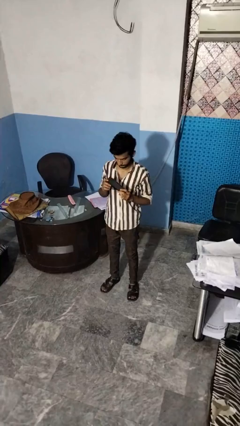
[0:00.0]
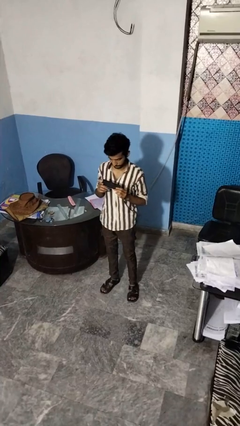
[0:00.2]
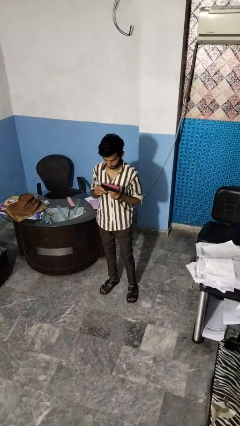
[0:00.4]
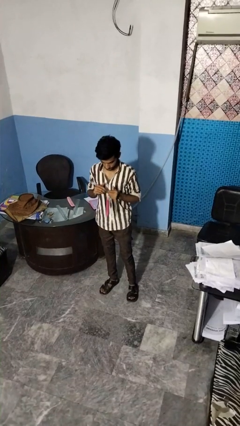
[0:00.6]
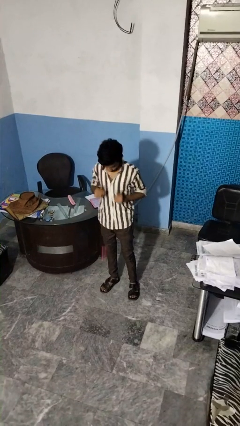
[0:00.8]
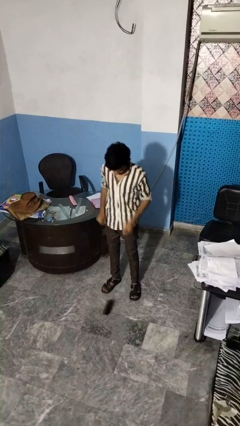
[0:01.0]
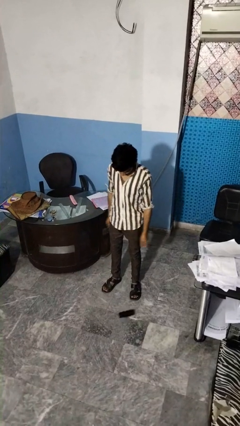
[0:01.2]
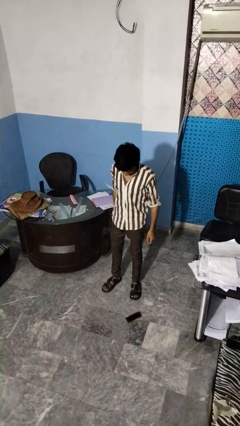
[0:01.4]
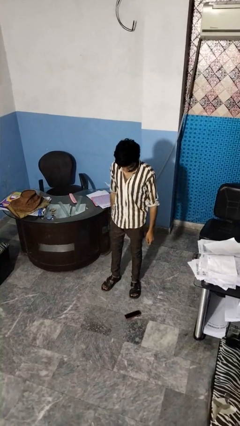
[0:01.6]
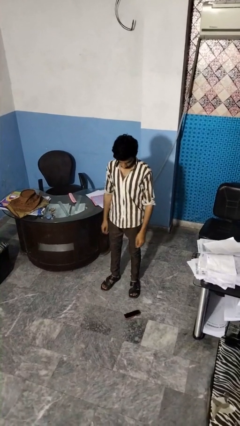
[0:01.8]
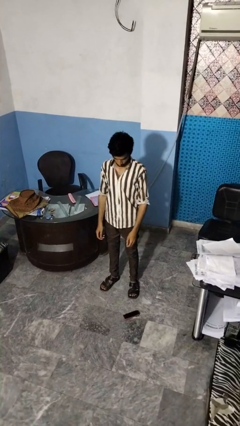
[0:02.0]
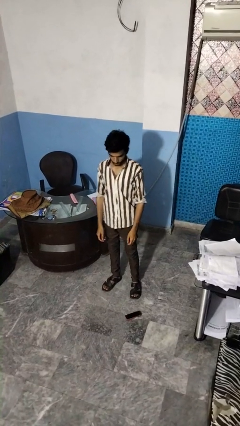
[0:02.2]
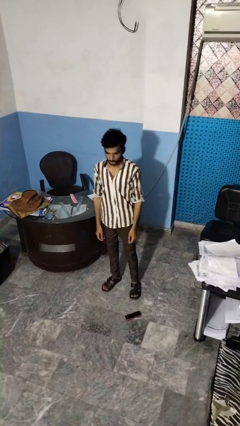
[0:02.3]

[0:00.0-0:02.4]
person drops object

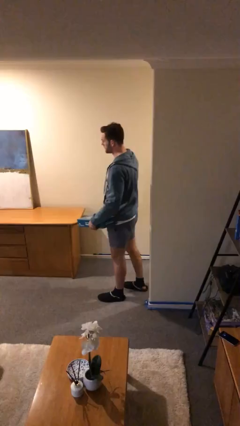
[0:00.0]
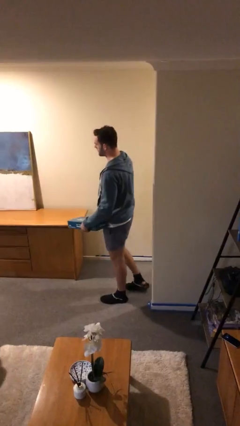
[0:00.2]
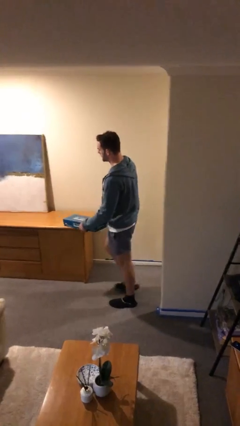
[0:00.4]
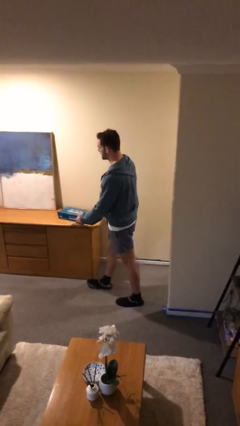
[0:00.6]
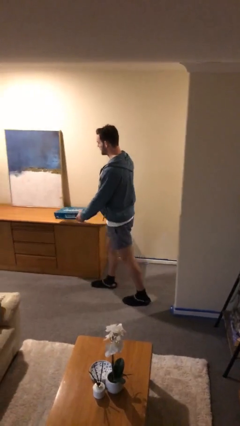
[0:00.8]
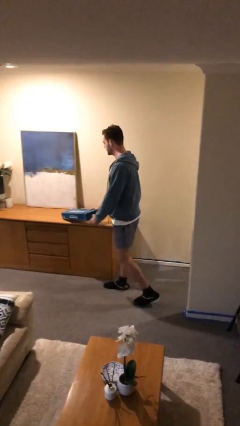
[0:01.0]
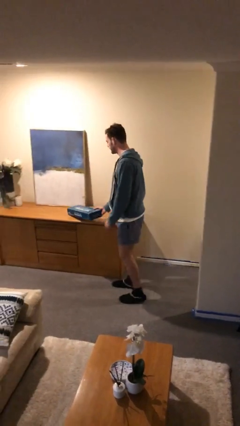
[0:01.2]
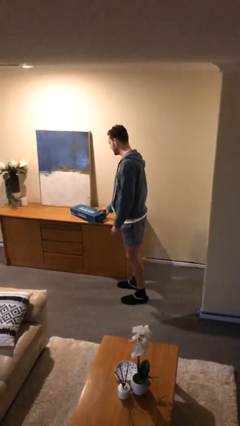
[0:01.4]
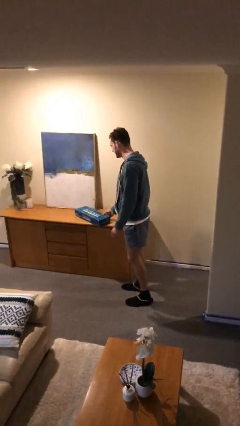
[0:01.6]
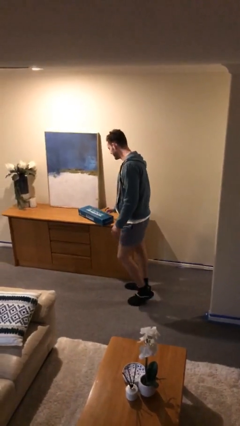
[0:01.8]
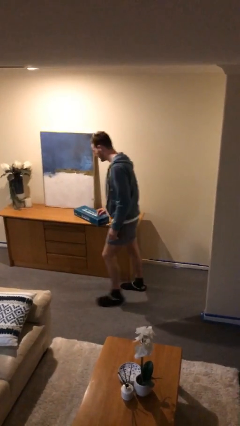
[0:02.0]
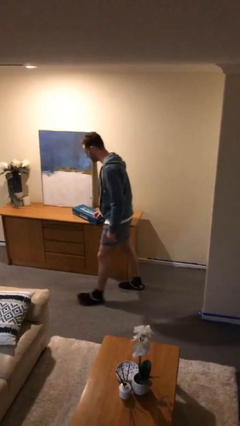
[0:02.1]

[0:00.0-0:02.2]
person puts down object on table

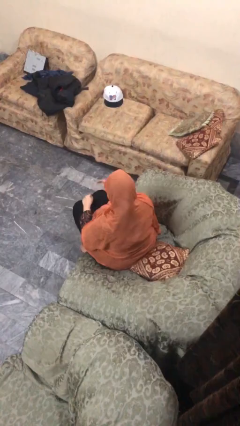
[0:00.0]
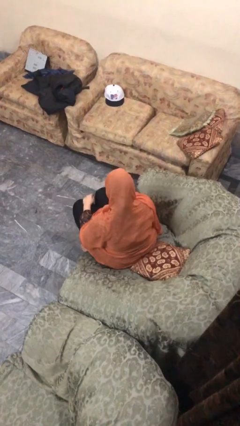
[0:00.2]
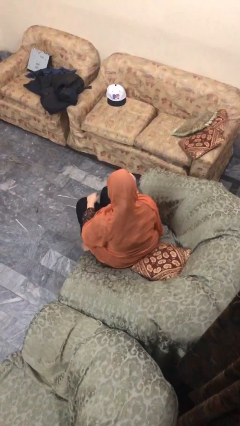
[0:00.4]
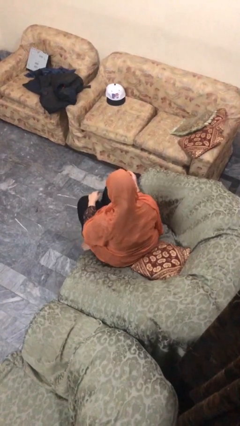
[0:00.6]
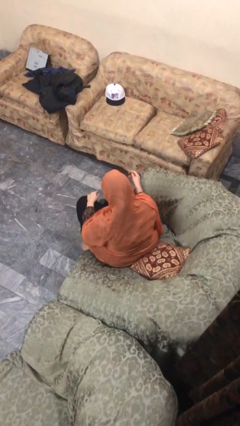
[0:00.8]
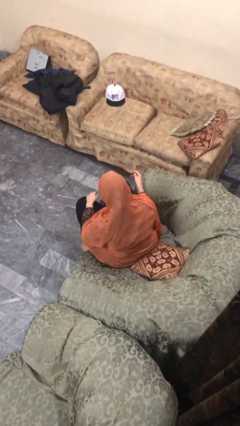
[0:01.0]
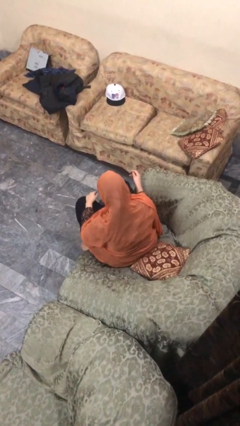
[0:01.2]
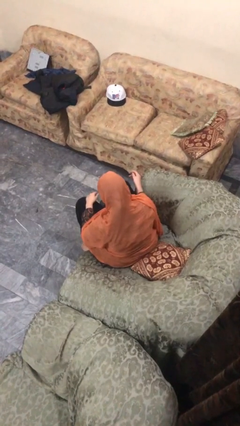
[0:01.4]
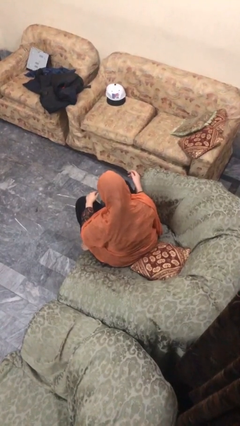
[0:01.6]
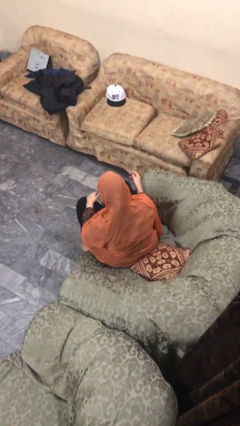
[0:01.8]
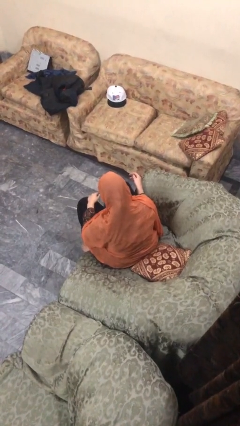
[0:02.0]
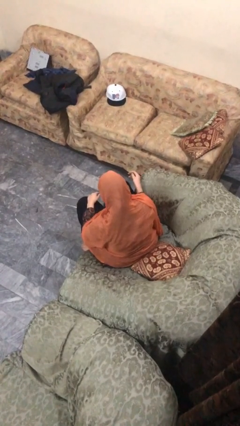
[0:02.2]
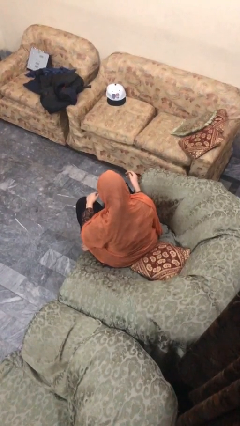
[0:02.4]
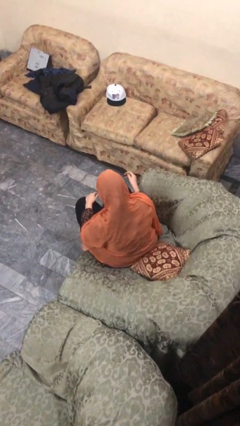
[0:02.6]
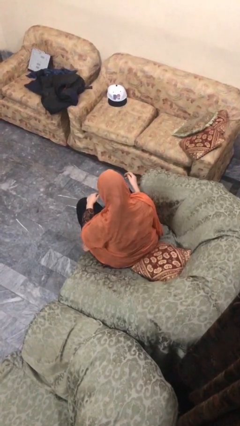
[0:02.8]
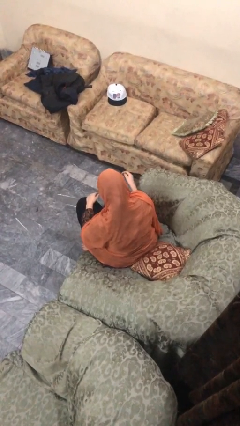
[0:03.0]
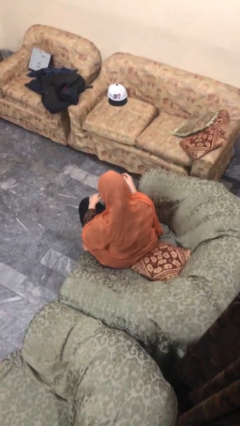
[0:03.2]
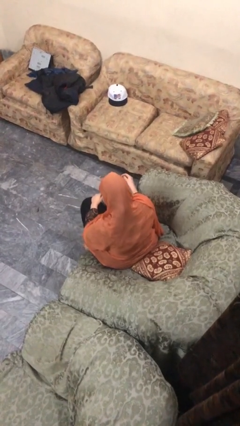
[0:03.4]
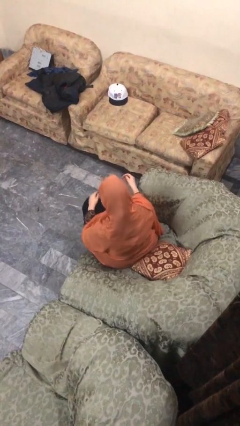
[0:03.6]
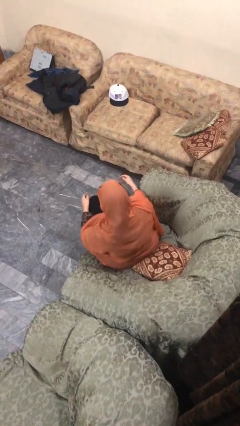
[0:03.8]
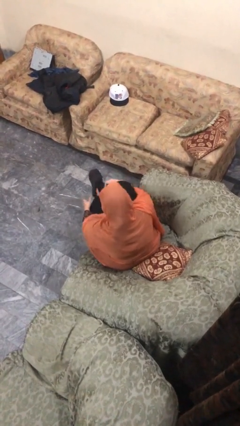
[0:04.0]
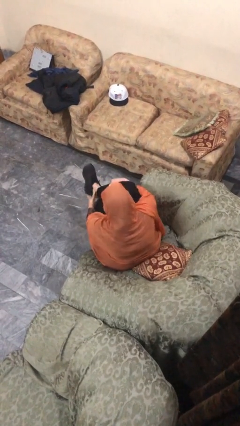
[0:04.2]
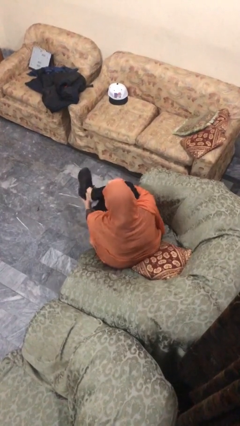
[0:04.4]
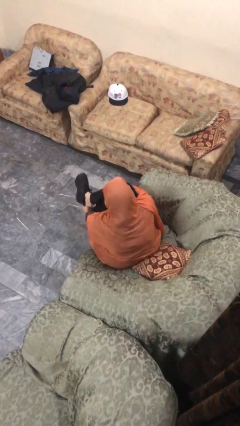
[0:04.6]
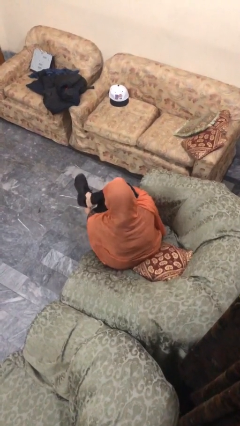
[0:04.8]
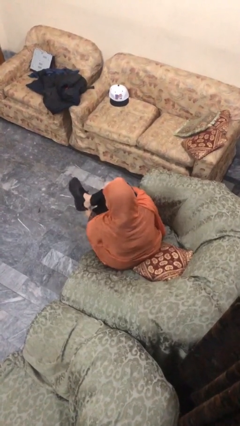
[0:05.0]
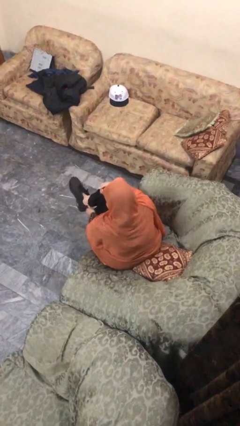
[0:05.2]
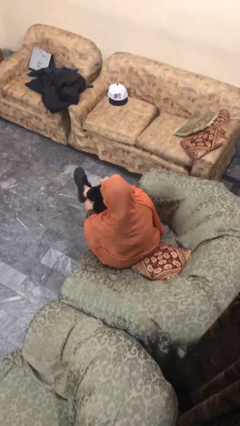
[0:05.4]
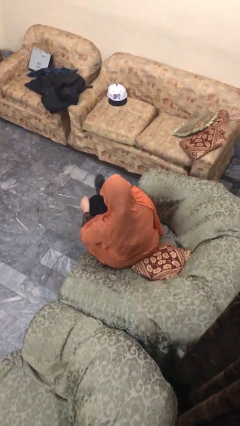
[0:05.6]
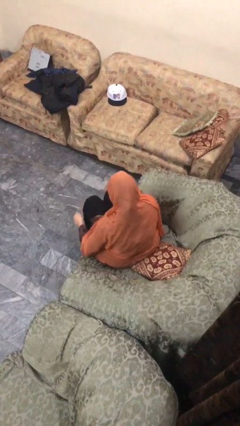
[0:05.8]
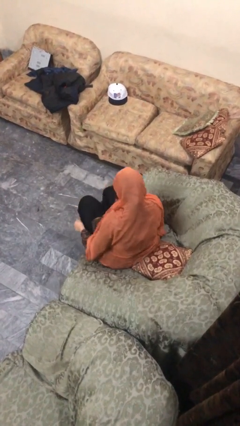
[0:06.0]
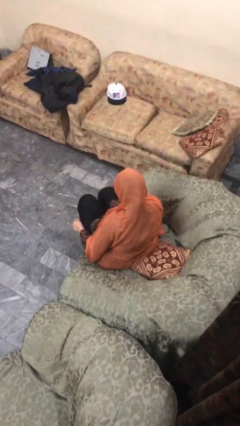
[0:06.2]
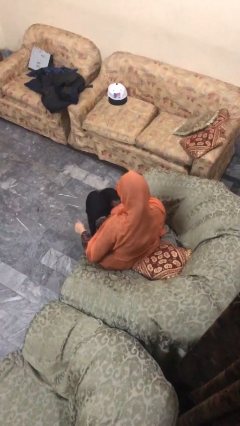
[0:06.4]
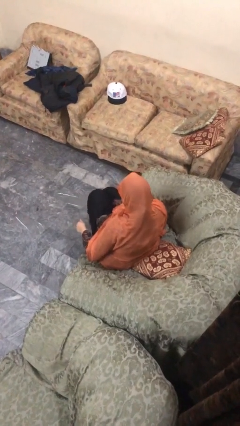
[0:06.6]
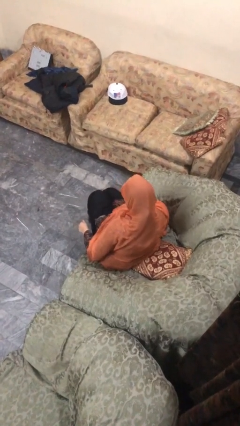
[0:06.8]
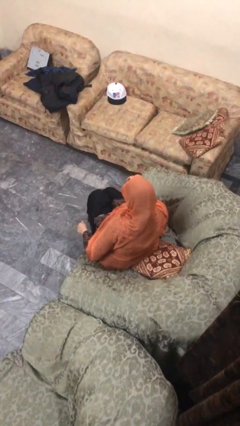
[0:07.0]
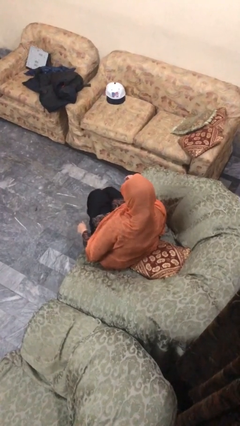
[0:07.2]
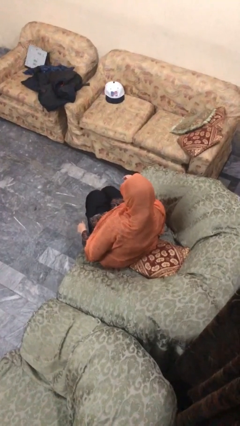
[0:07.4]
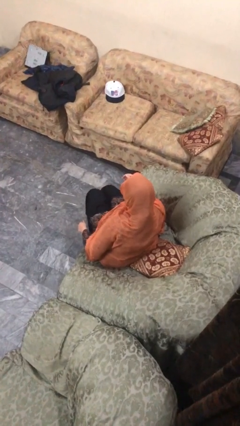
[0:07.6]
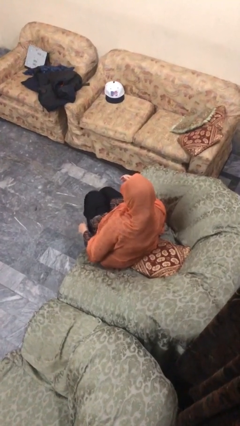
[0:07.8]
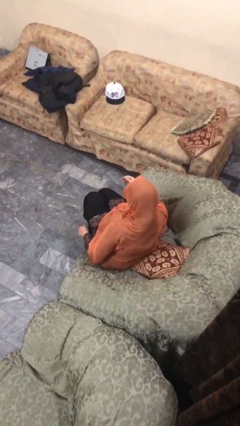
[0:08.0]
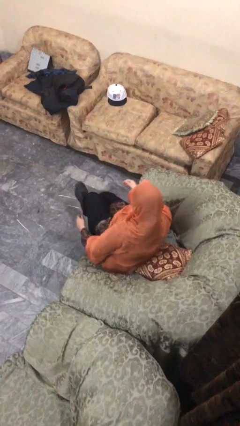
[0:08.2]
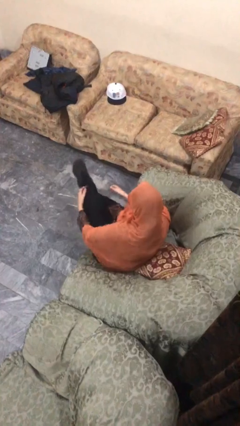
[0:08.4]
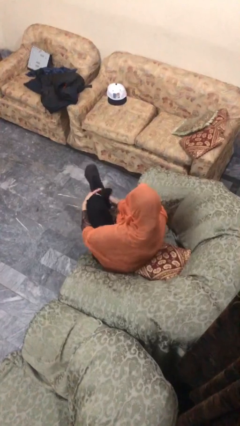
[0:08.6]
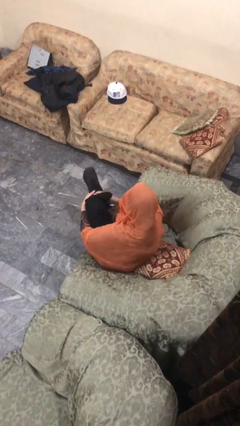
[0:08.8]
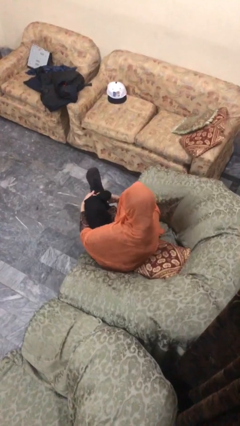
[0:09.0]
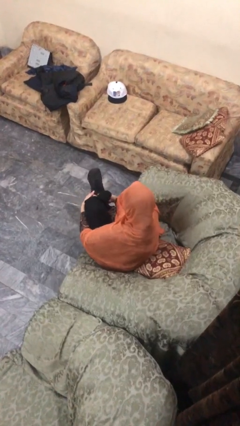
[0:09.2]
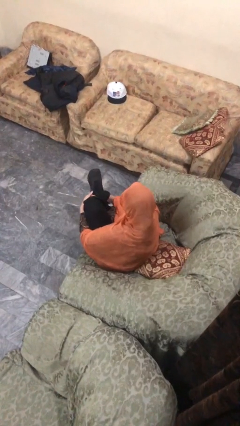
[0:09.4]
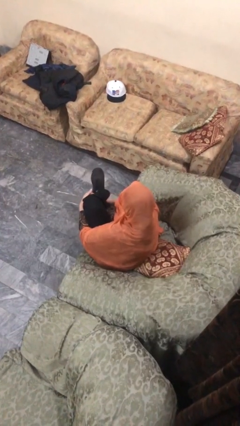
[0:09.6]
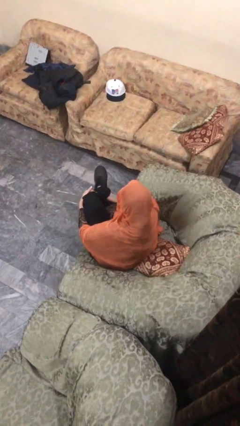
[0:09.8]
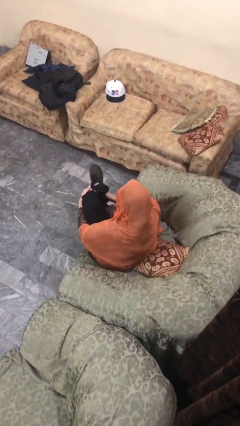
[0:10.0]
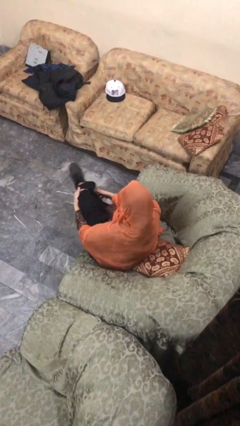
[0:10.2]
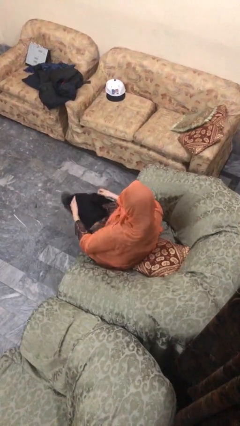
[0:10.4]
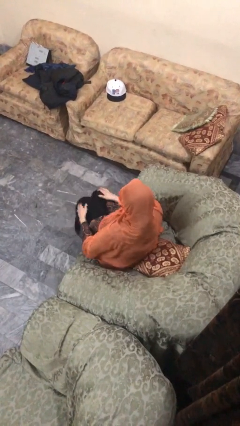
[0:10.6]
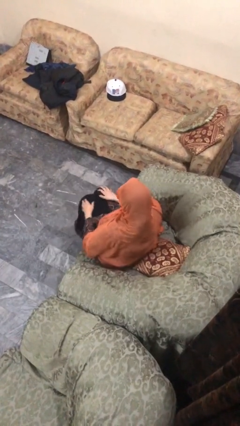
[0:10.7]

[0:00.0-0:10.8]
person puts on shoes

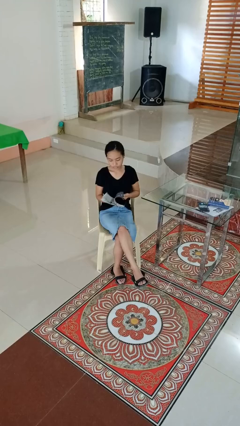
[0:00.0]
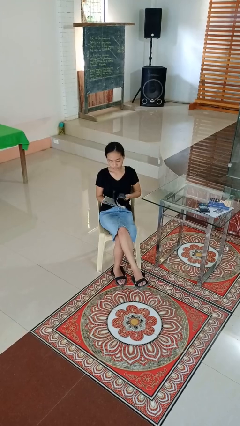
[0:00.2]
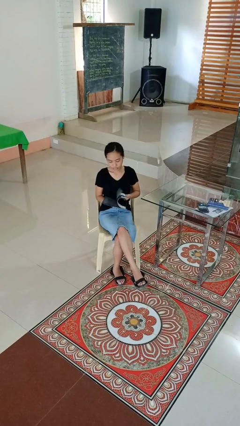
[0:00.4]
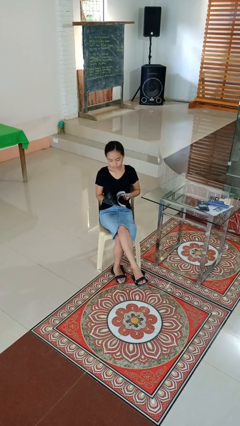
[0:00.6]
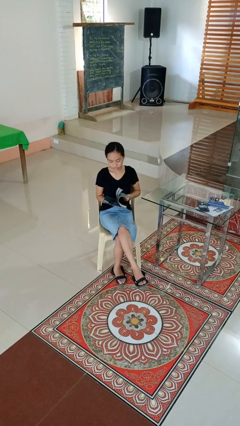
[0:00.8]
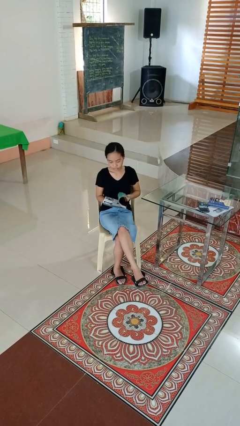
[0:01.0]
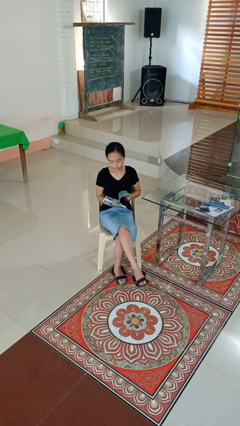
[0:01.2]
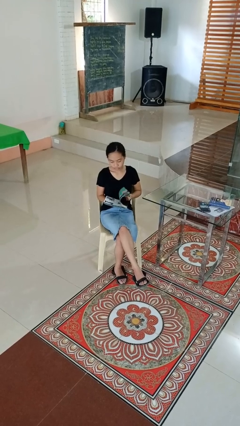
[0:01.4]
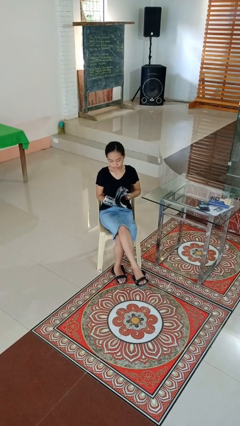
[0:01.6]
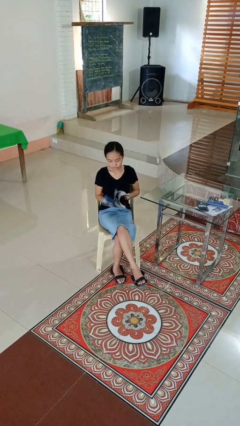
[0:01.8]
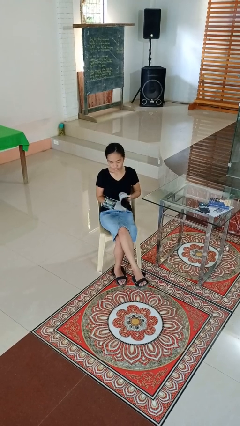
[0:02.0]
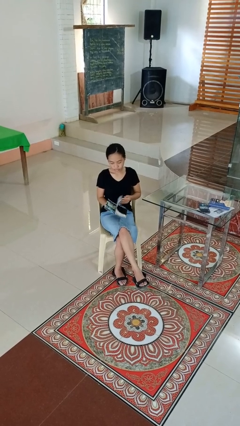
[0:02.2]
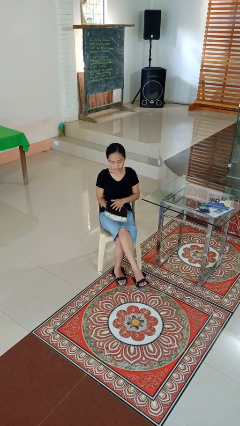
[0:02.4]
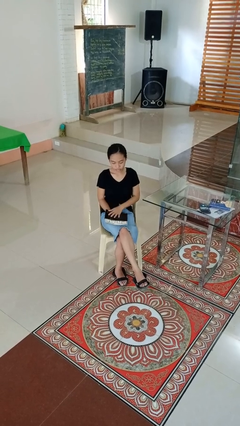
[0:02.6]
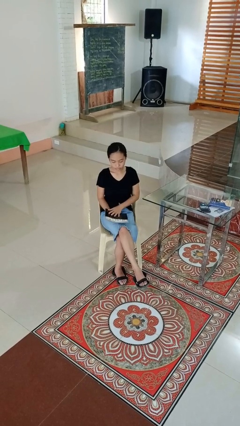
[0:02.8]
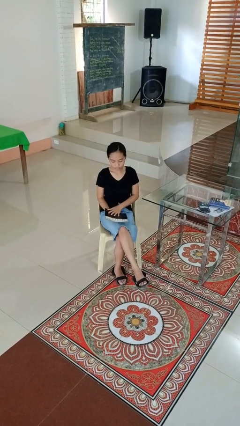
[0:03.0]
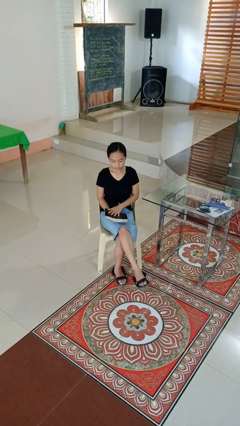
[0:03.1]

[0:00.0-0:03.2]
person reads magazine
